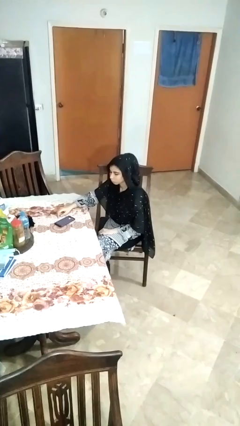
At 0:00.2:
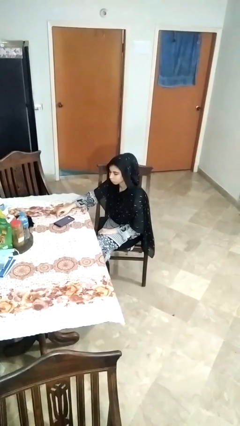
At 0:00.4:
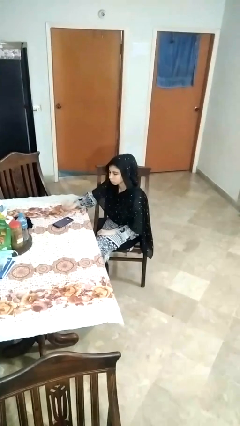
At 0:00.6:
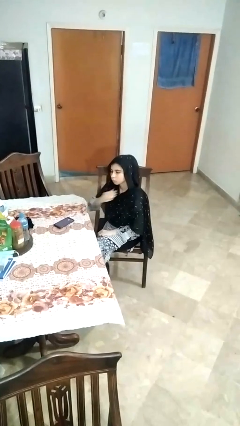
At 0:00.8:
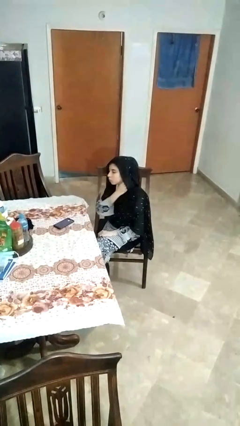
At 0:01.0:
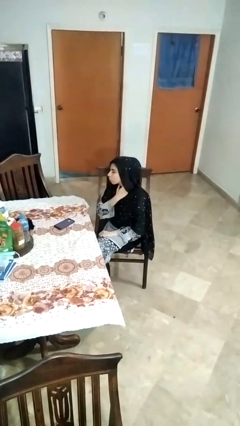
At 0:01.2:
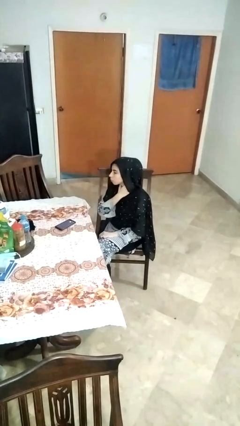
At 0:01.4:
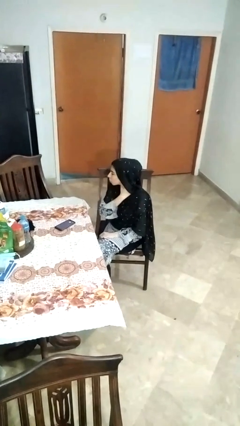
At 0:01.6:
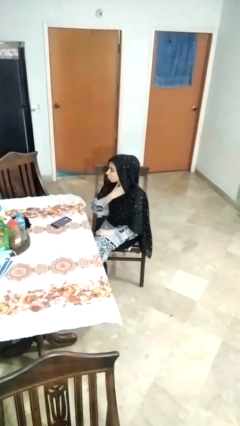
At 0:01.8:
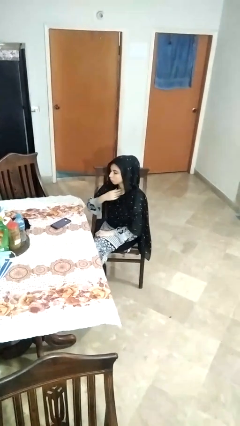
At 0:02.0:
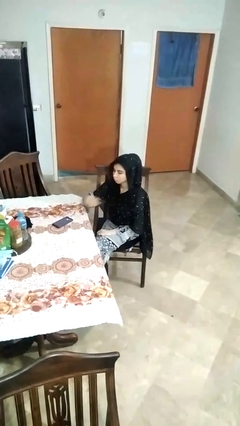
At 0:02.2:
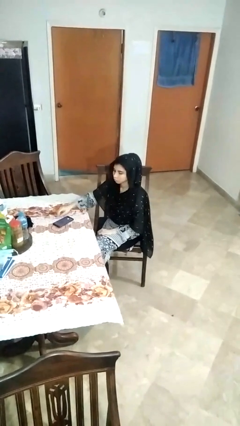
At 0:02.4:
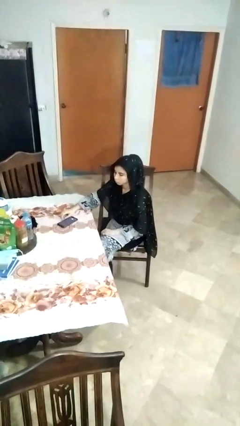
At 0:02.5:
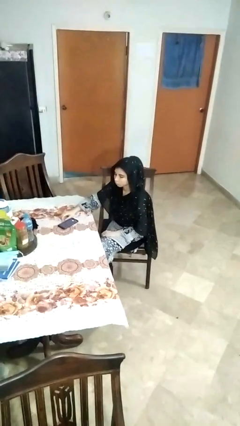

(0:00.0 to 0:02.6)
person rubs neck

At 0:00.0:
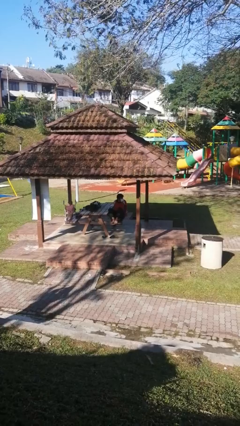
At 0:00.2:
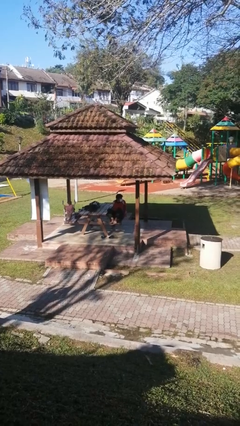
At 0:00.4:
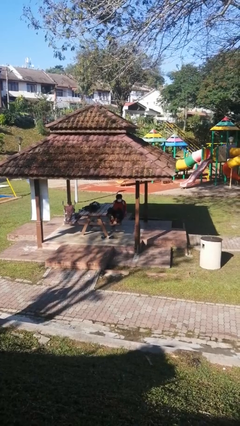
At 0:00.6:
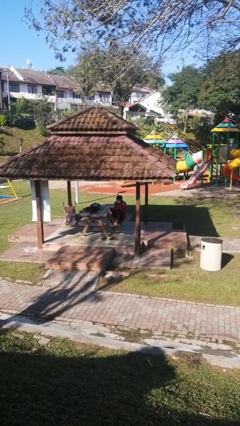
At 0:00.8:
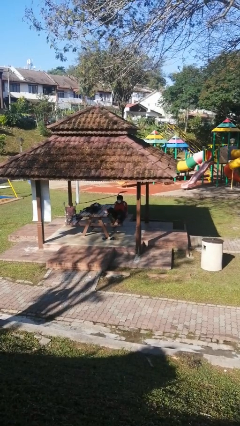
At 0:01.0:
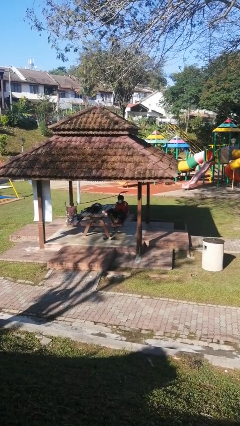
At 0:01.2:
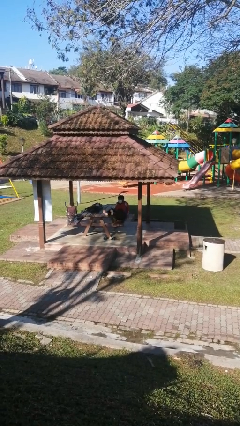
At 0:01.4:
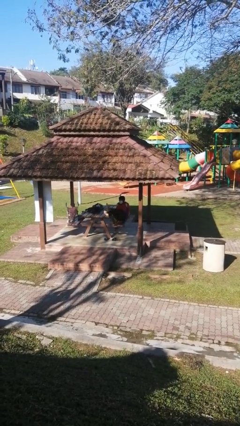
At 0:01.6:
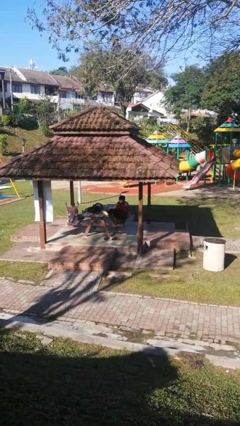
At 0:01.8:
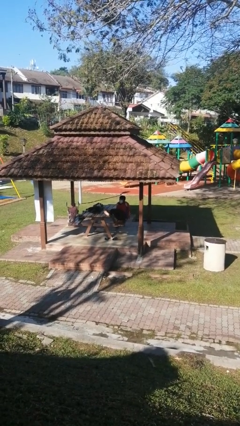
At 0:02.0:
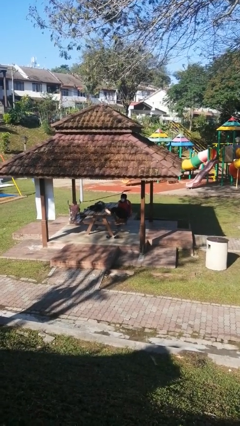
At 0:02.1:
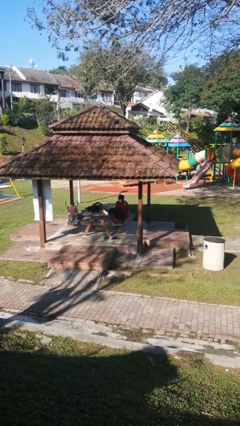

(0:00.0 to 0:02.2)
person puts feet up

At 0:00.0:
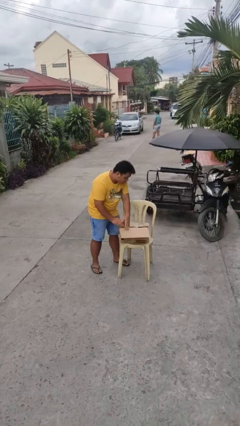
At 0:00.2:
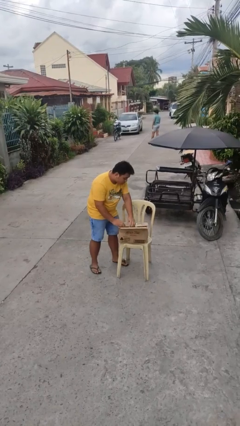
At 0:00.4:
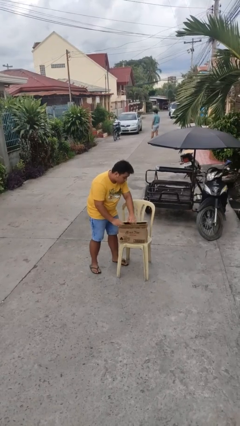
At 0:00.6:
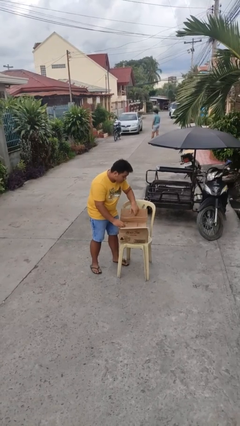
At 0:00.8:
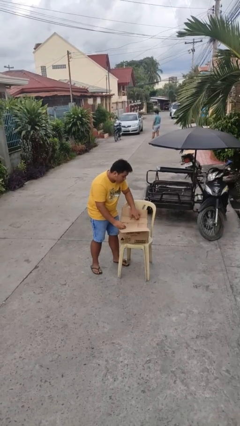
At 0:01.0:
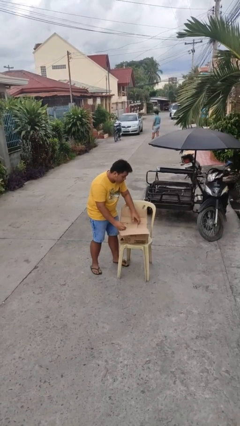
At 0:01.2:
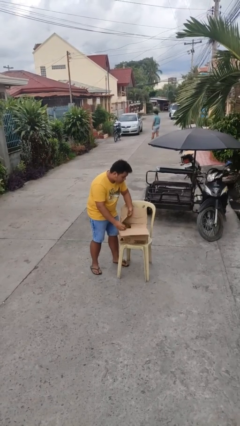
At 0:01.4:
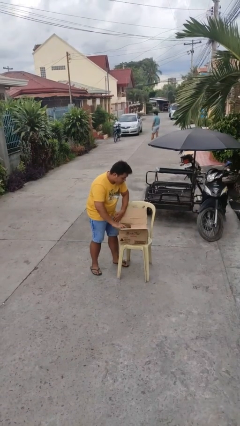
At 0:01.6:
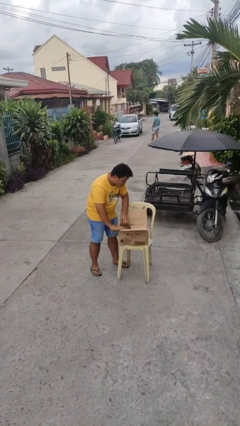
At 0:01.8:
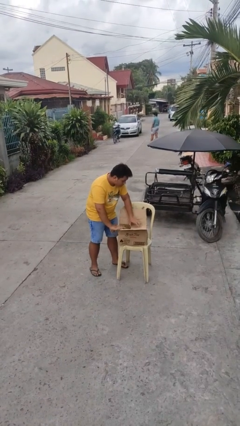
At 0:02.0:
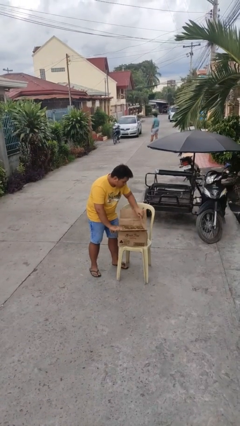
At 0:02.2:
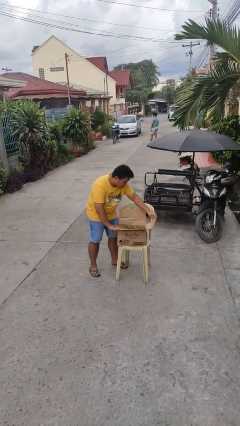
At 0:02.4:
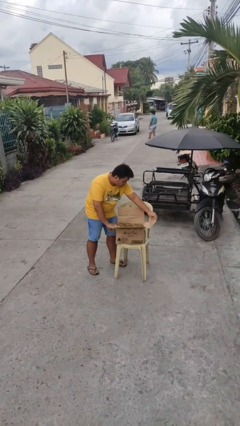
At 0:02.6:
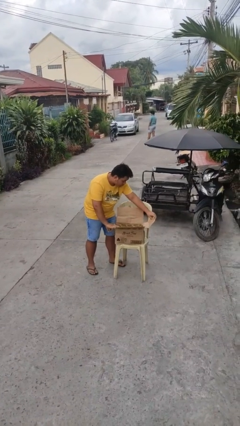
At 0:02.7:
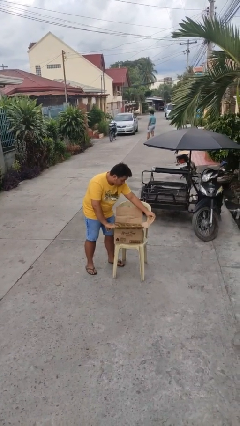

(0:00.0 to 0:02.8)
person opens box

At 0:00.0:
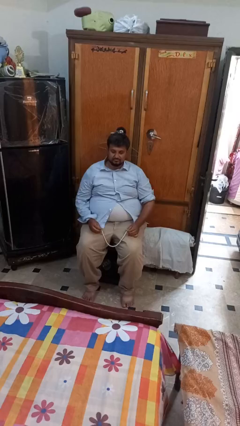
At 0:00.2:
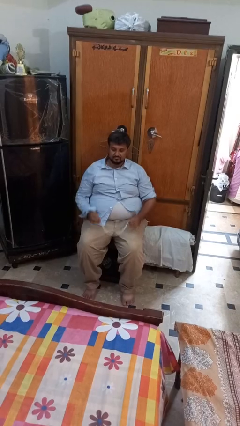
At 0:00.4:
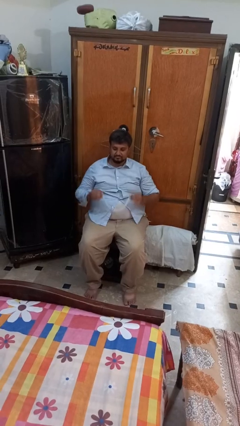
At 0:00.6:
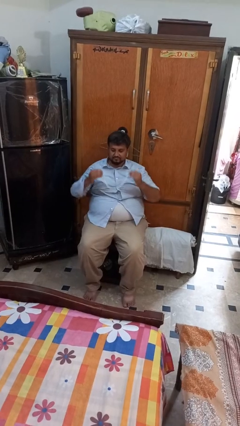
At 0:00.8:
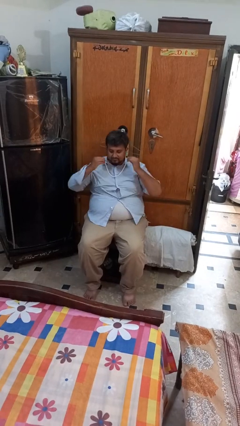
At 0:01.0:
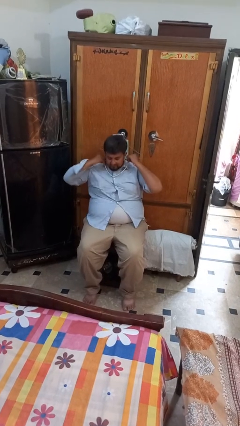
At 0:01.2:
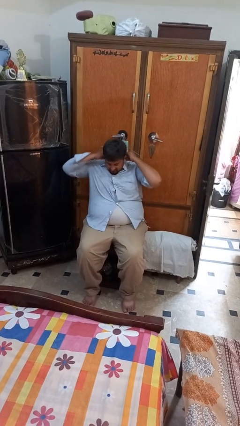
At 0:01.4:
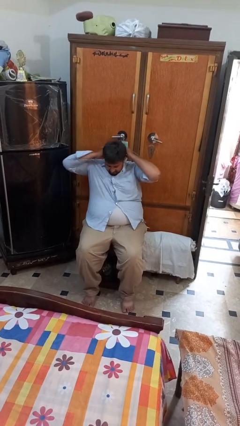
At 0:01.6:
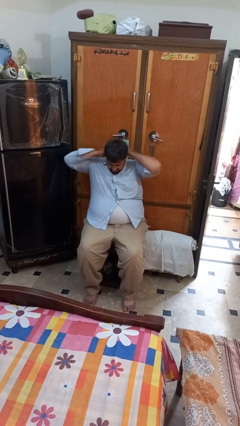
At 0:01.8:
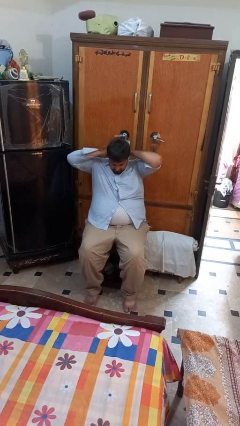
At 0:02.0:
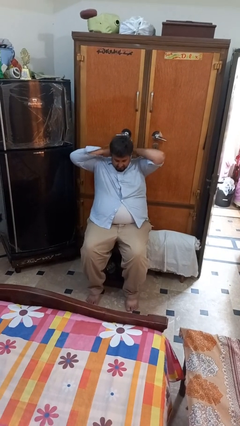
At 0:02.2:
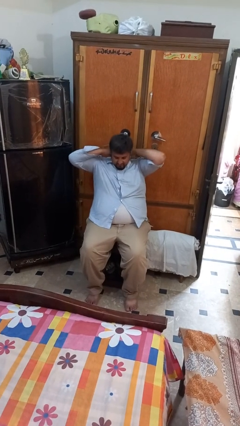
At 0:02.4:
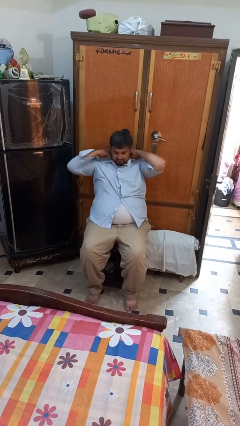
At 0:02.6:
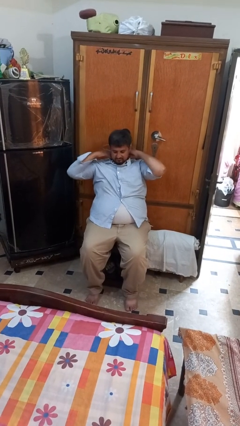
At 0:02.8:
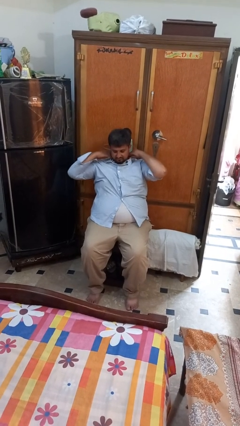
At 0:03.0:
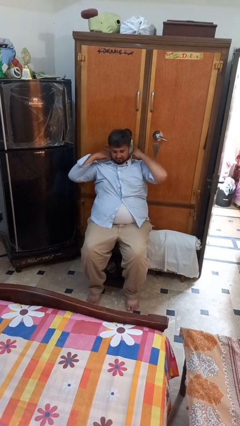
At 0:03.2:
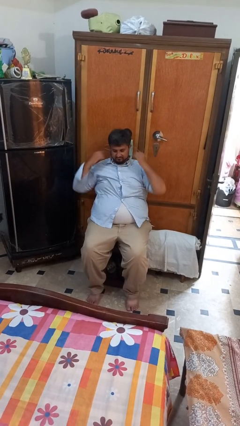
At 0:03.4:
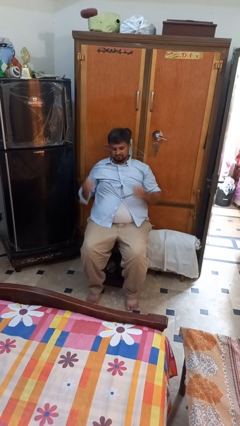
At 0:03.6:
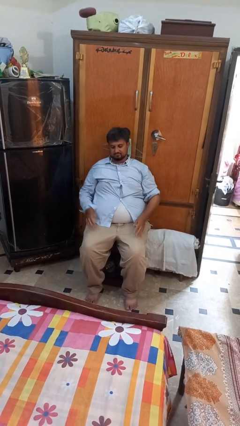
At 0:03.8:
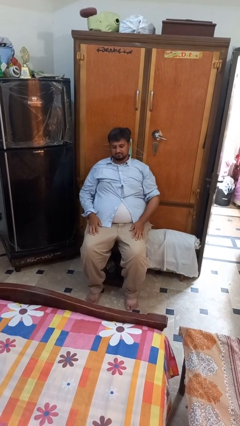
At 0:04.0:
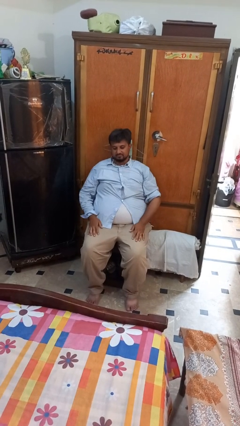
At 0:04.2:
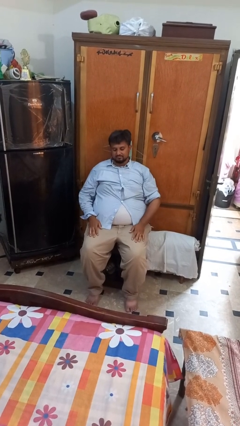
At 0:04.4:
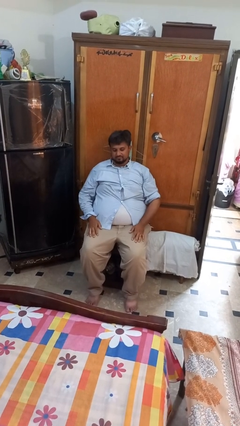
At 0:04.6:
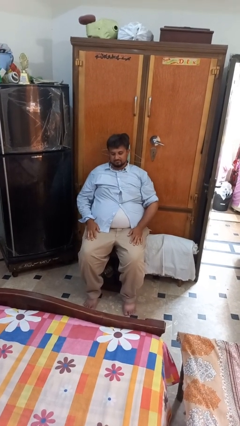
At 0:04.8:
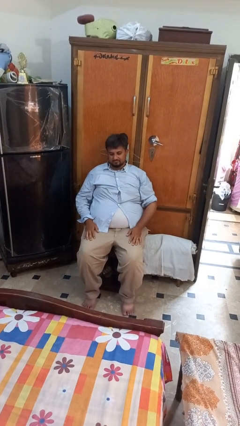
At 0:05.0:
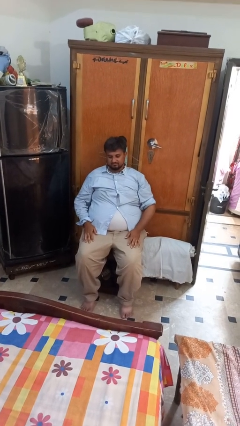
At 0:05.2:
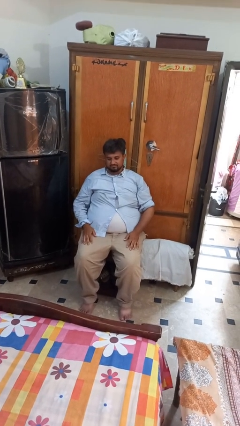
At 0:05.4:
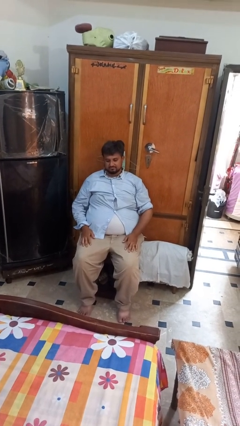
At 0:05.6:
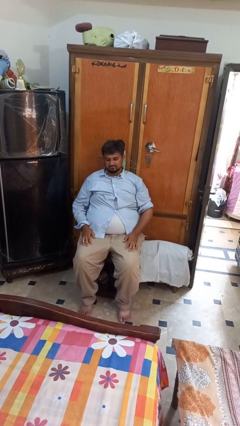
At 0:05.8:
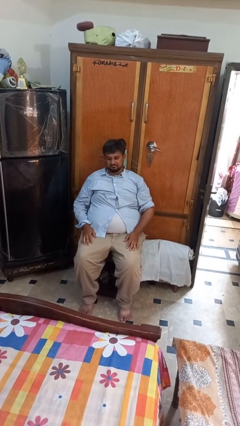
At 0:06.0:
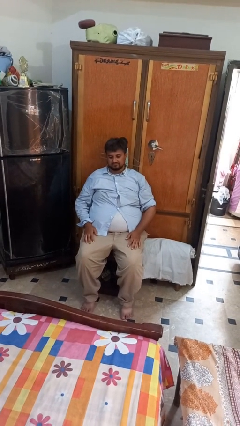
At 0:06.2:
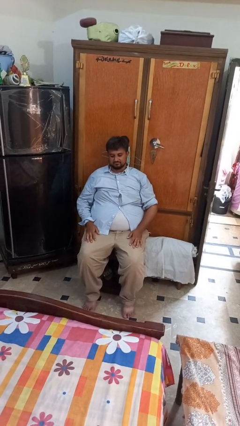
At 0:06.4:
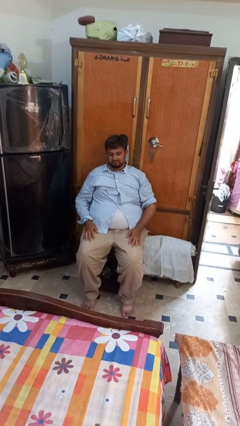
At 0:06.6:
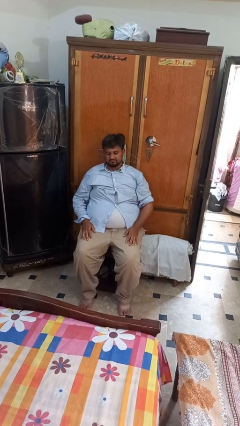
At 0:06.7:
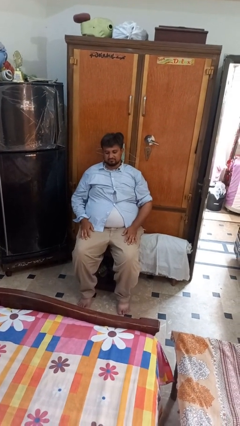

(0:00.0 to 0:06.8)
person puts on necklace

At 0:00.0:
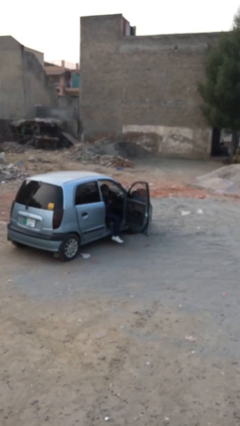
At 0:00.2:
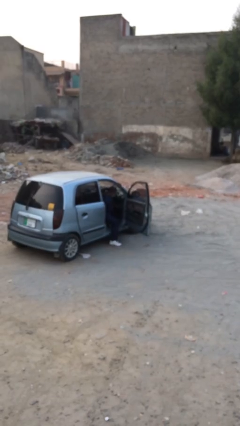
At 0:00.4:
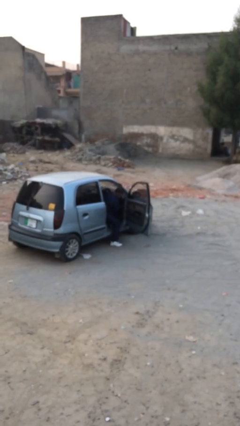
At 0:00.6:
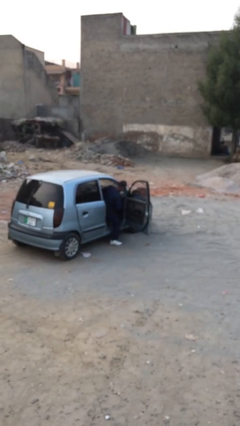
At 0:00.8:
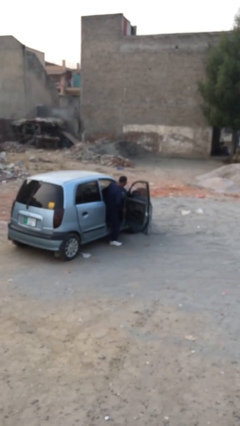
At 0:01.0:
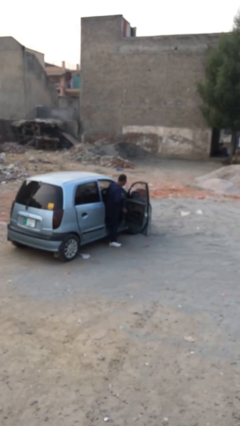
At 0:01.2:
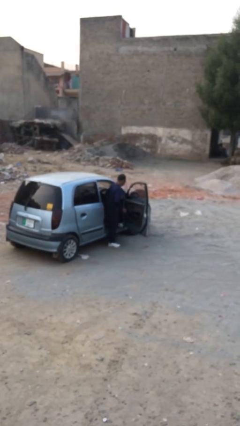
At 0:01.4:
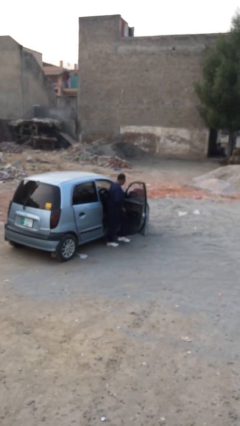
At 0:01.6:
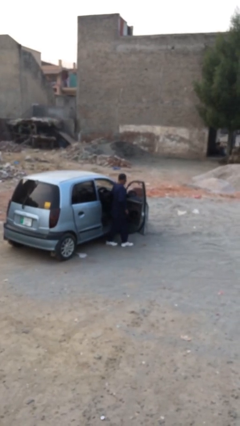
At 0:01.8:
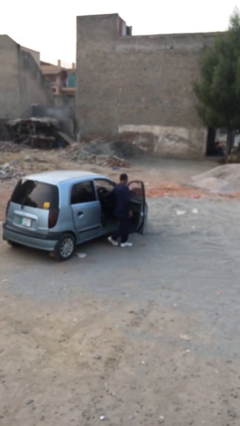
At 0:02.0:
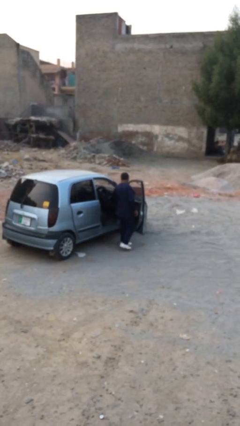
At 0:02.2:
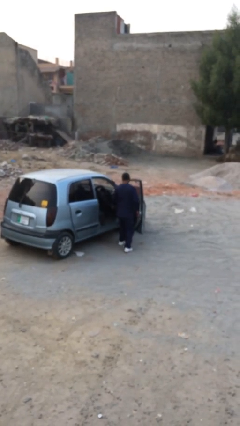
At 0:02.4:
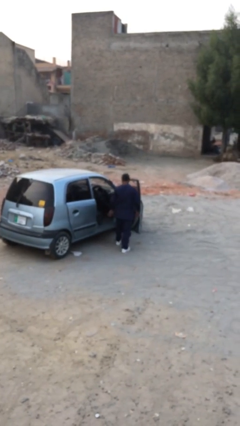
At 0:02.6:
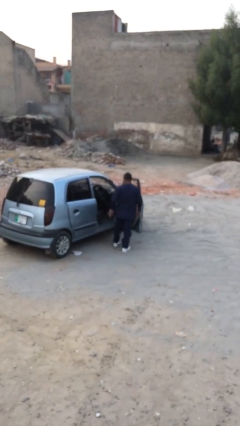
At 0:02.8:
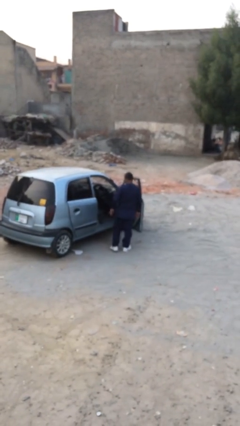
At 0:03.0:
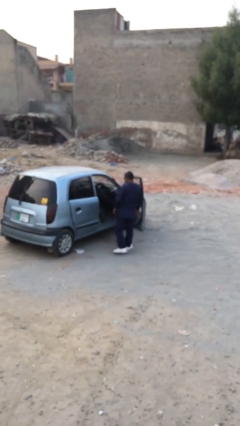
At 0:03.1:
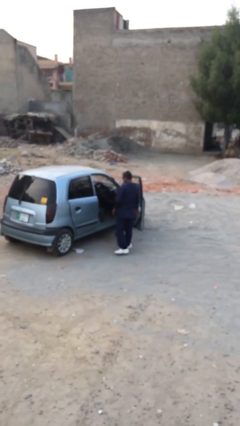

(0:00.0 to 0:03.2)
person exits car
